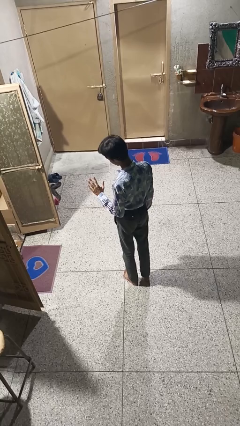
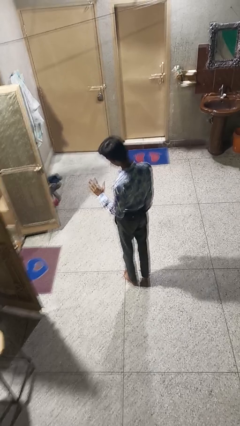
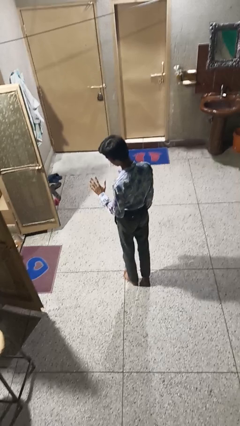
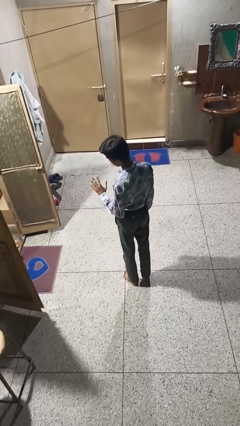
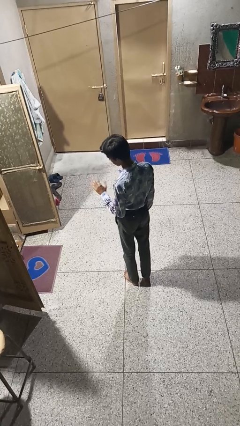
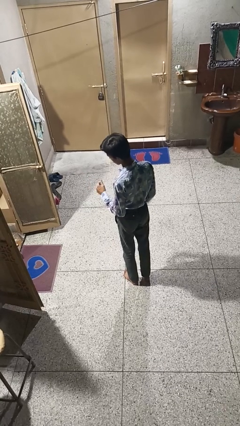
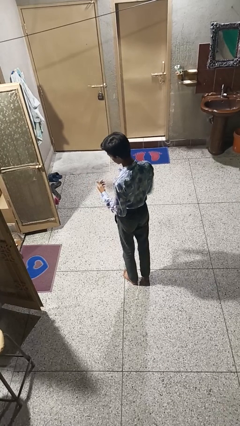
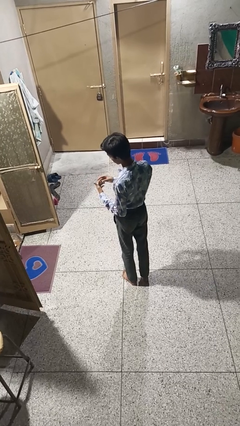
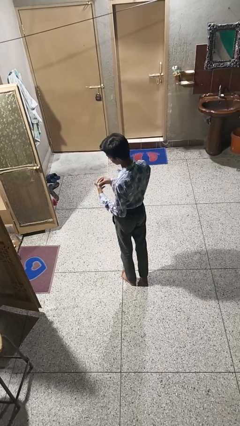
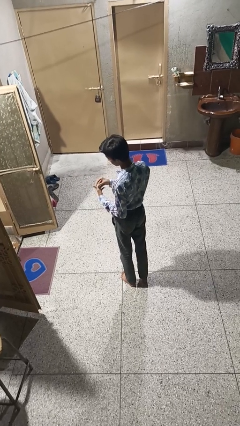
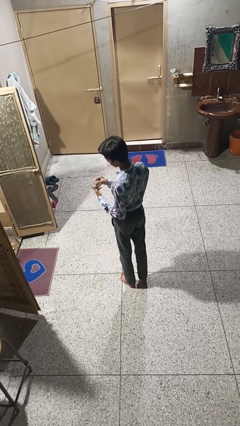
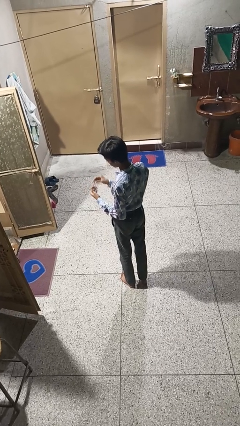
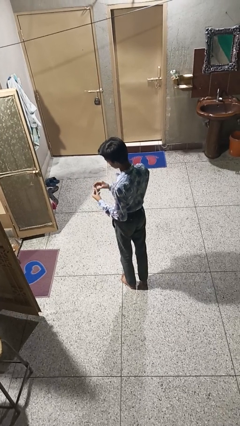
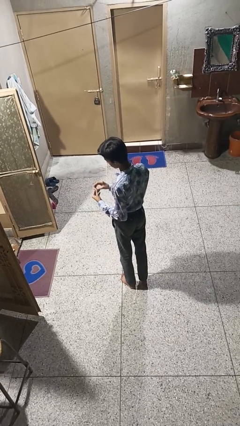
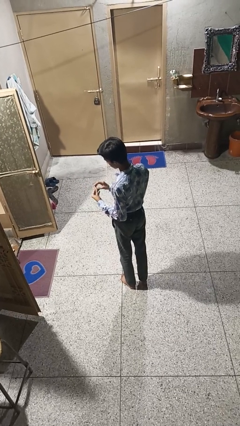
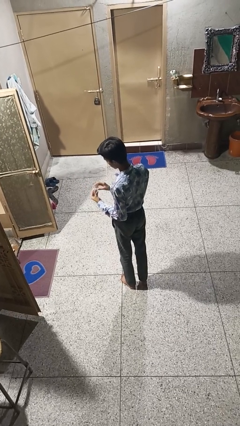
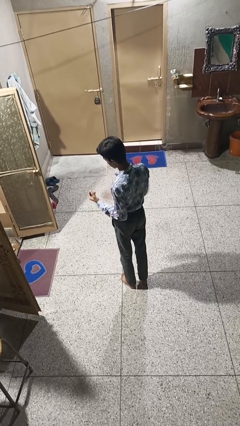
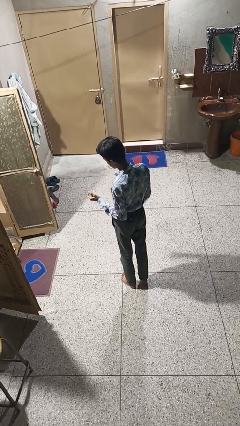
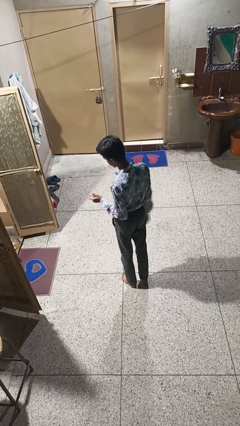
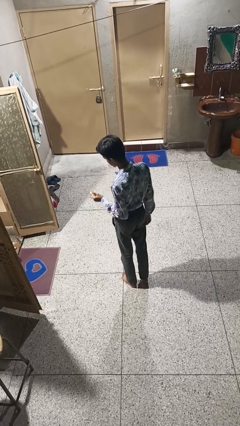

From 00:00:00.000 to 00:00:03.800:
person takes off ring

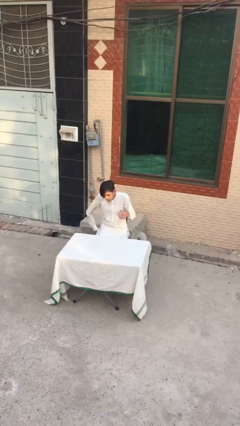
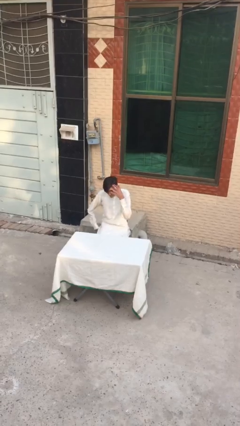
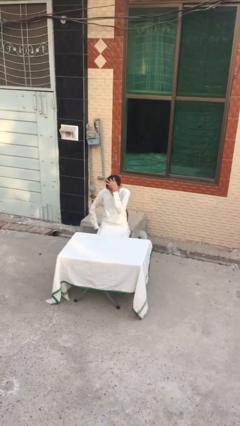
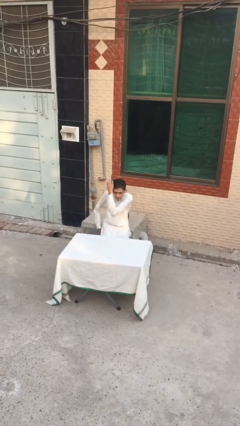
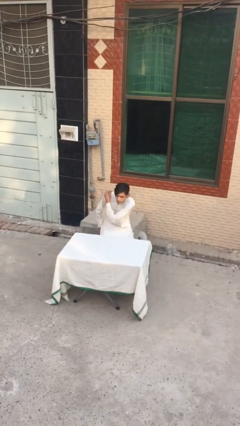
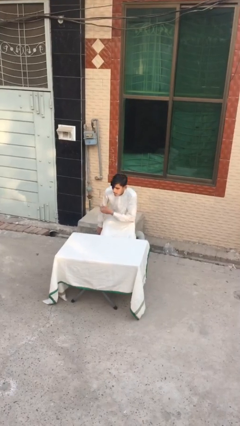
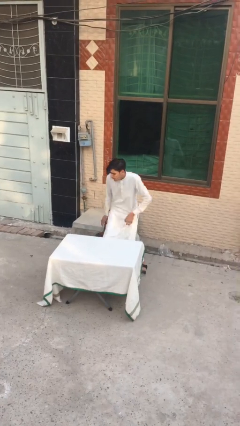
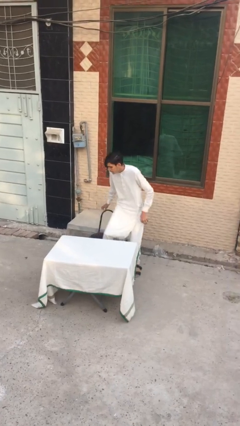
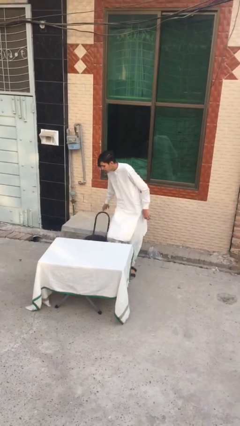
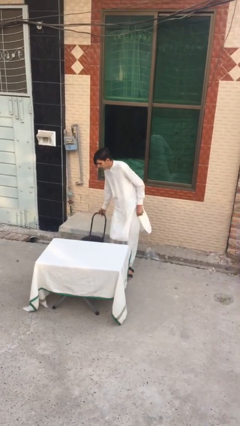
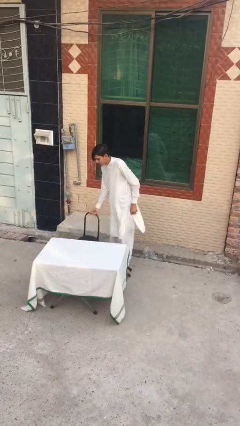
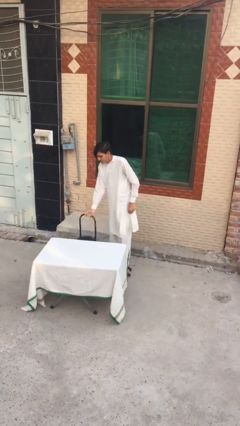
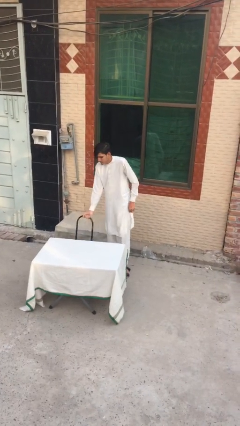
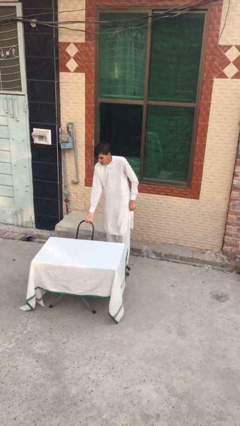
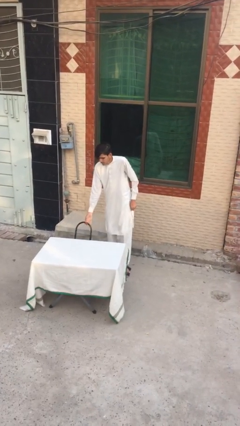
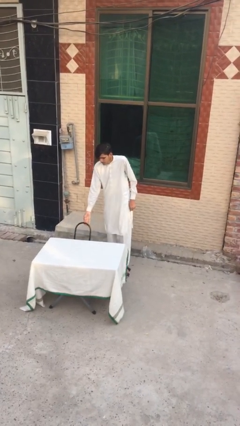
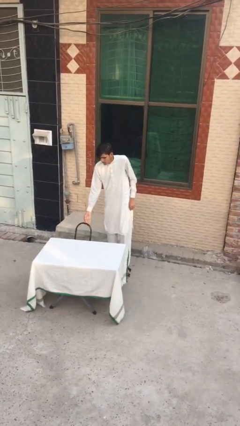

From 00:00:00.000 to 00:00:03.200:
person stands up

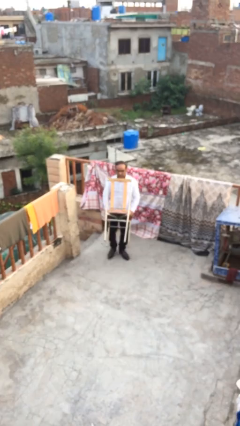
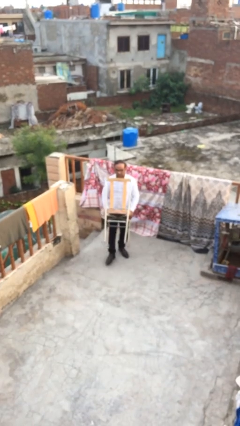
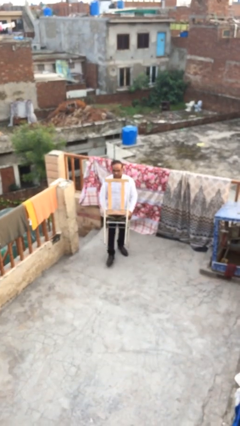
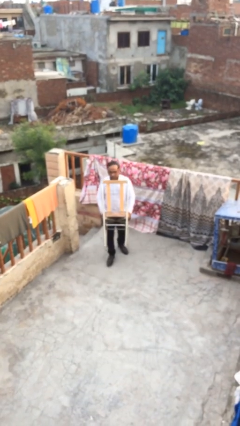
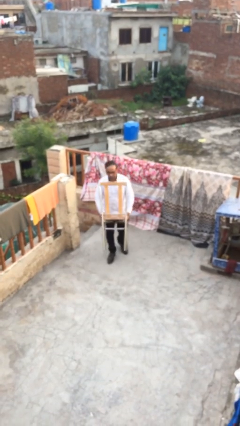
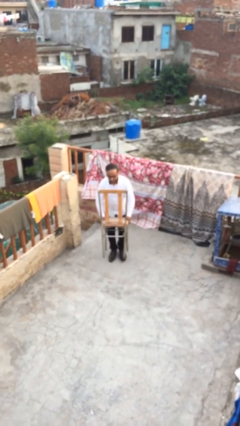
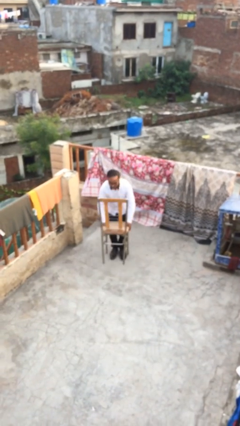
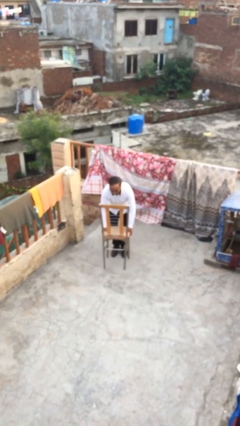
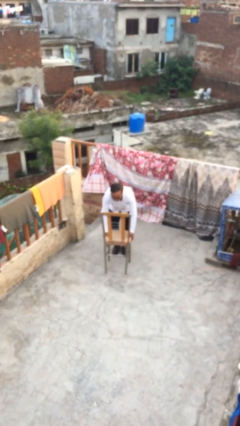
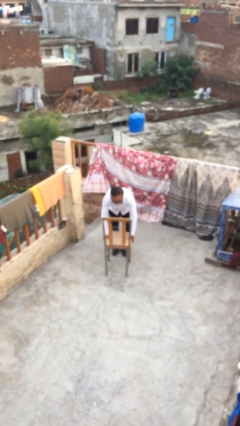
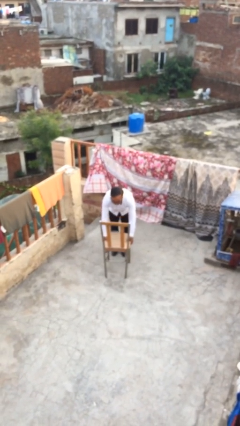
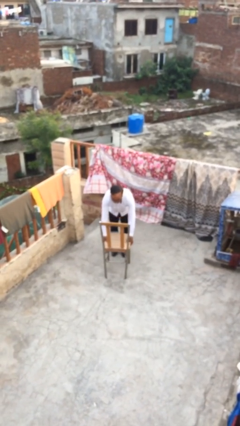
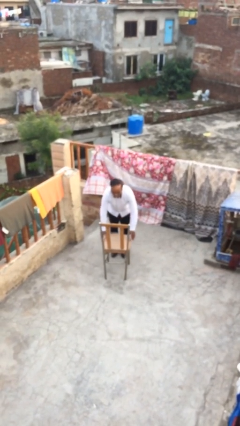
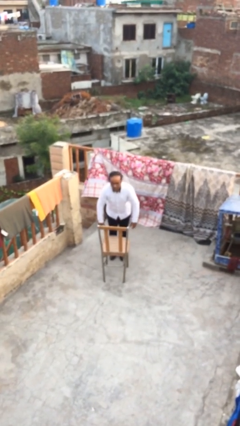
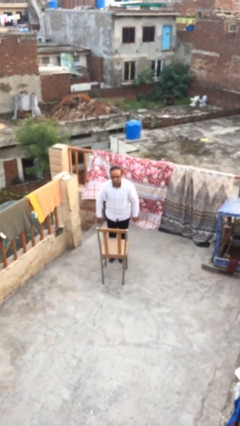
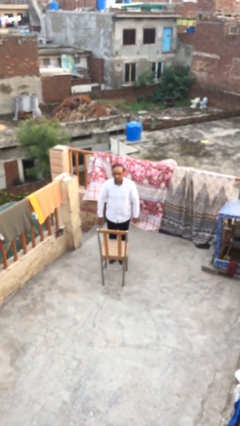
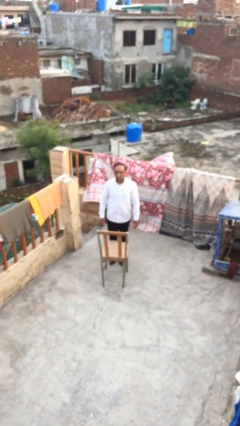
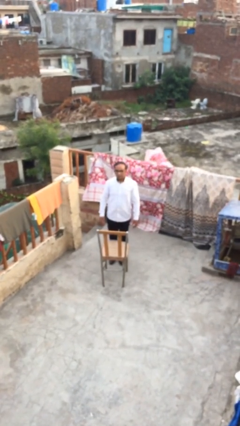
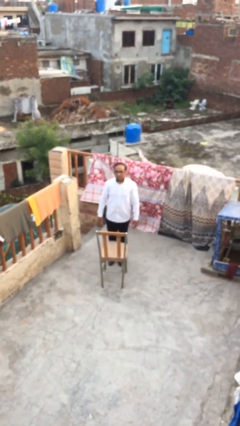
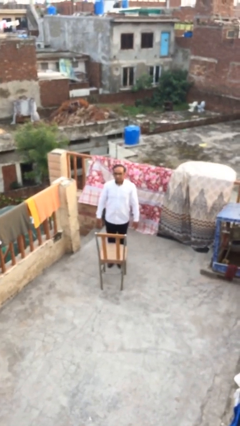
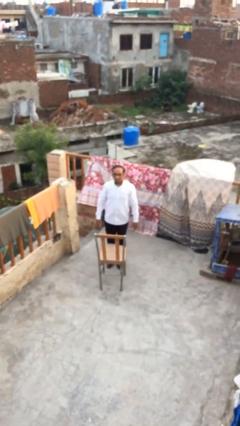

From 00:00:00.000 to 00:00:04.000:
person puts down object on floor

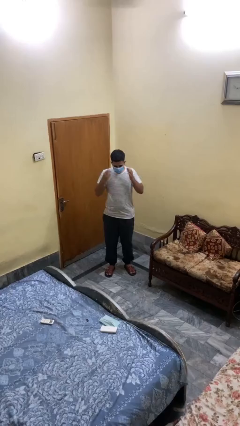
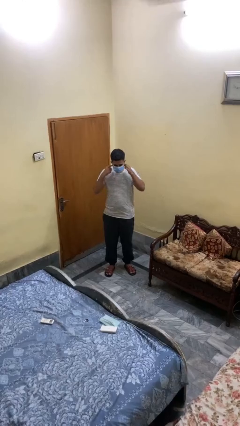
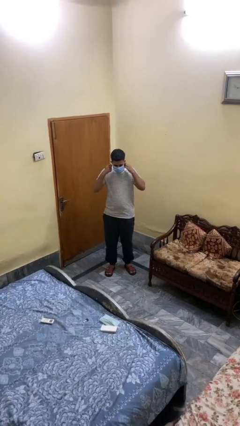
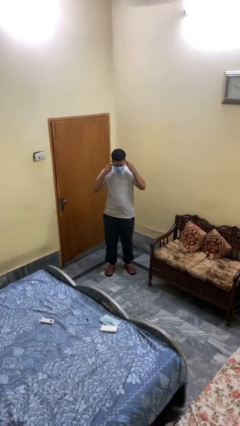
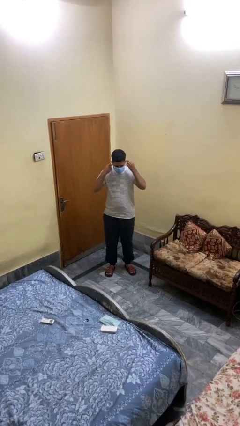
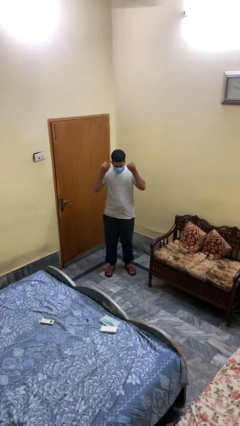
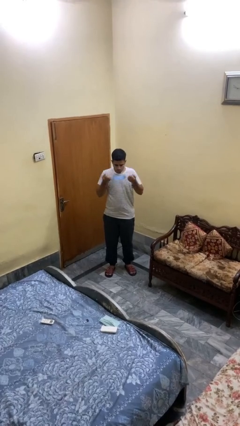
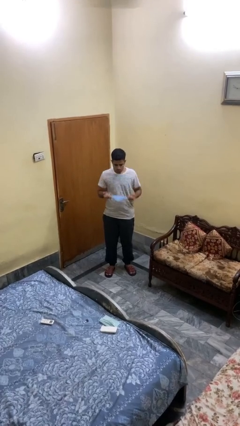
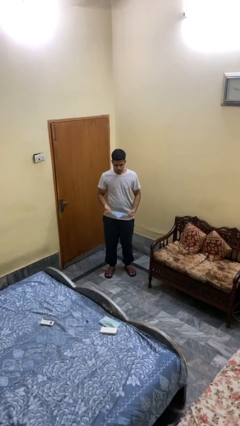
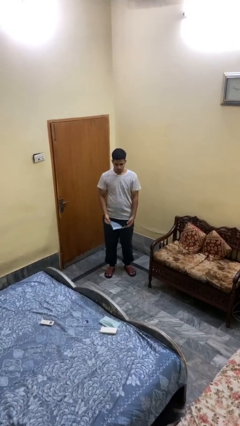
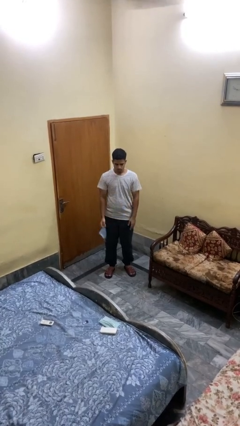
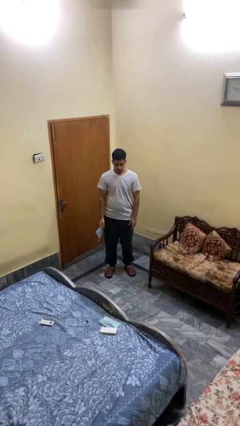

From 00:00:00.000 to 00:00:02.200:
person takes off facemask

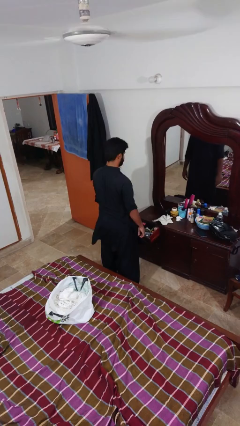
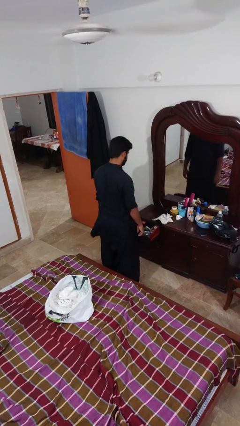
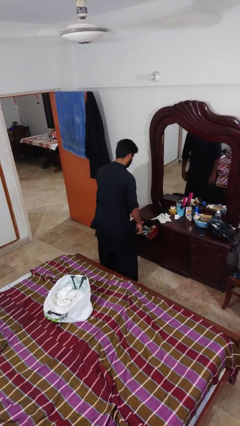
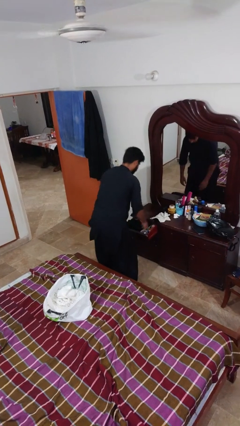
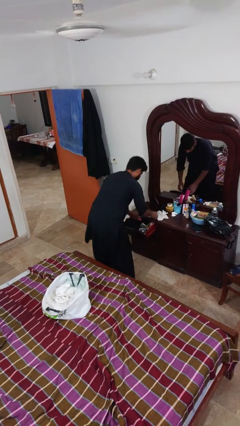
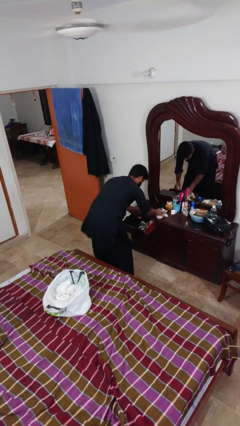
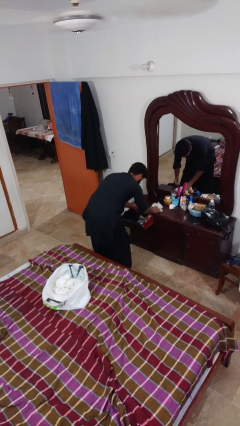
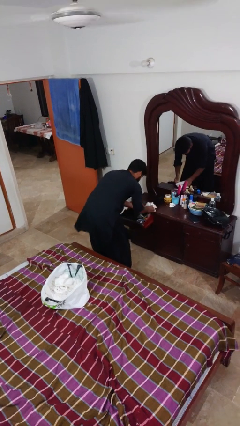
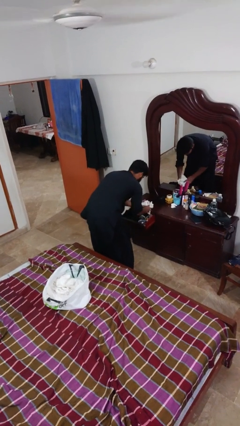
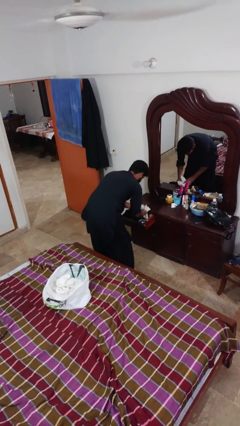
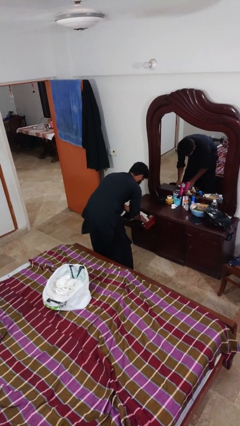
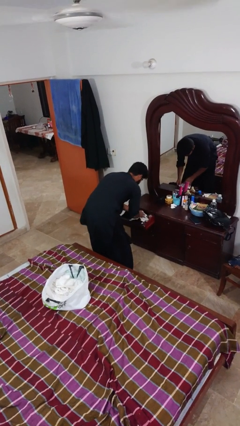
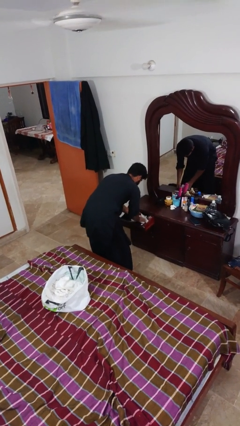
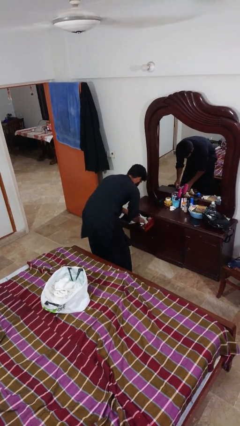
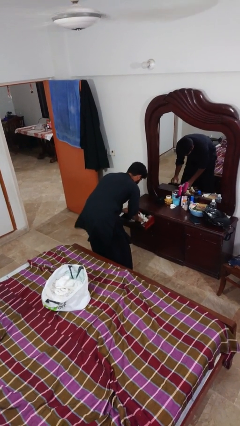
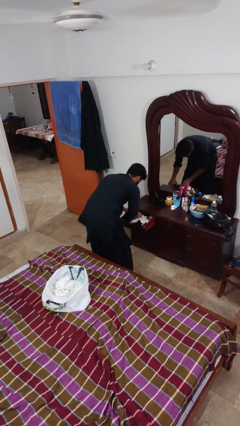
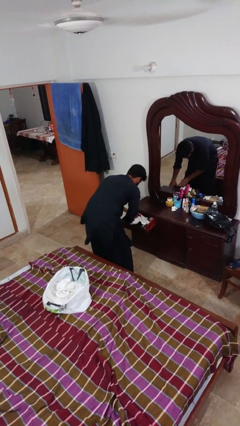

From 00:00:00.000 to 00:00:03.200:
person puts clothes into dresser

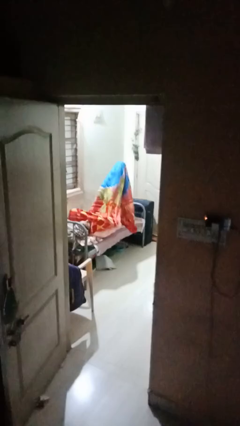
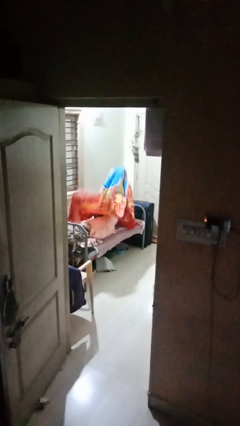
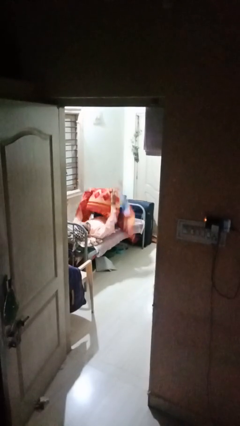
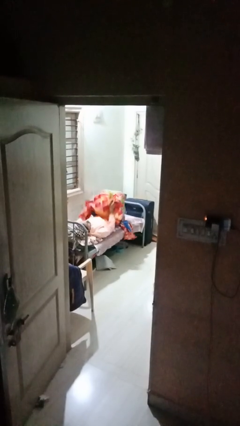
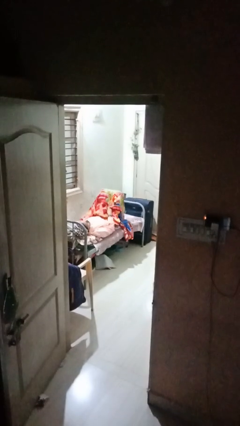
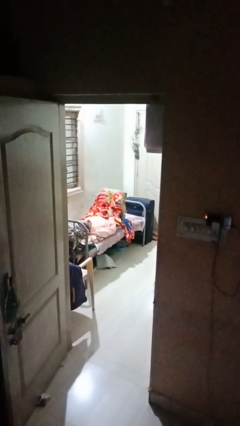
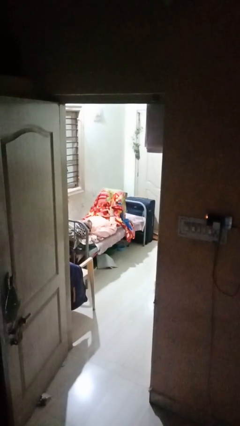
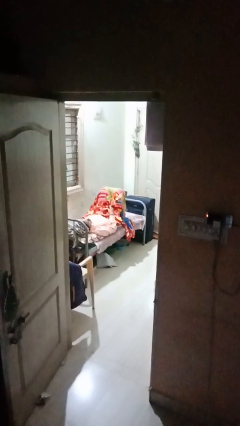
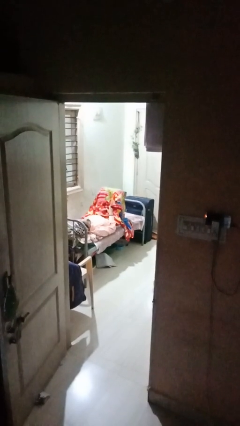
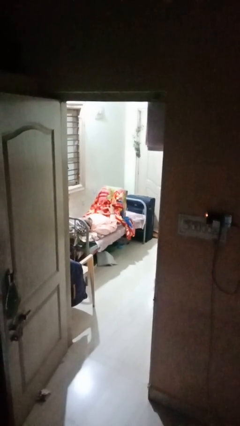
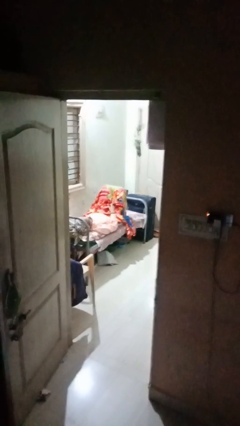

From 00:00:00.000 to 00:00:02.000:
person uncovers with bedsheets
